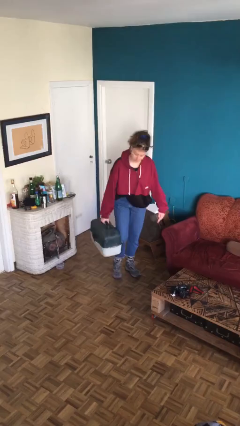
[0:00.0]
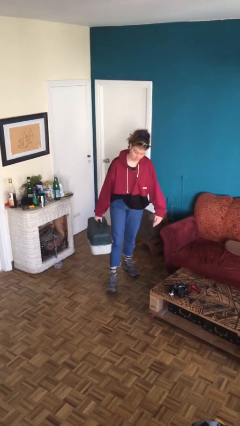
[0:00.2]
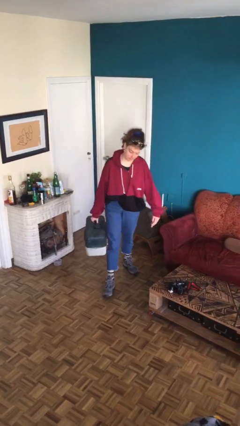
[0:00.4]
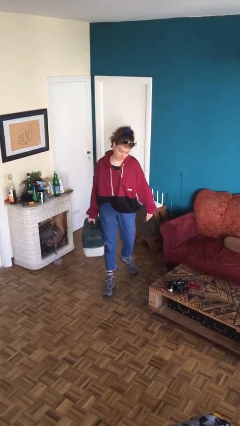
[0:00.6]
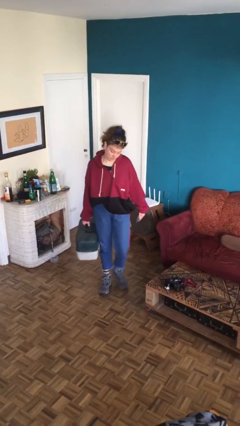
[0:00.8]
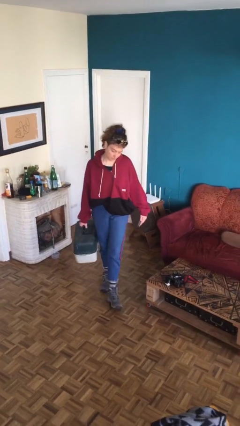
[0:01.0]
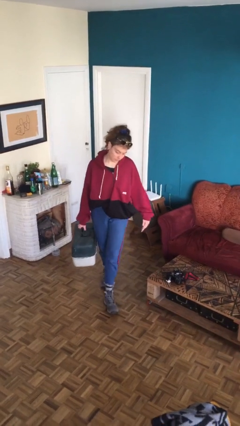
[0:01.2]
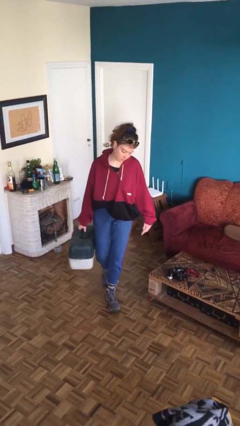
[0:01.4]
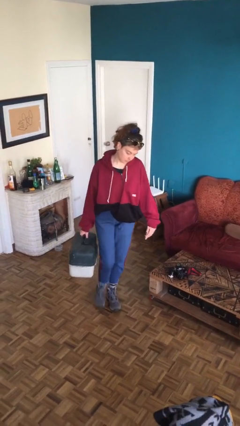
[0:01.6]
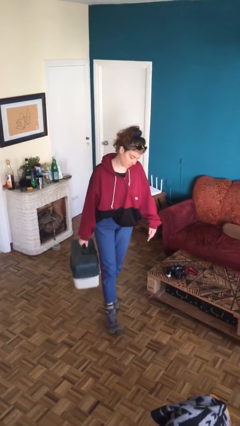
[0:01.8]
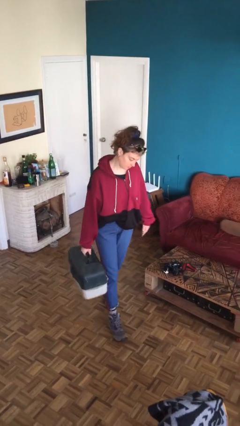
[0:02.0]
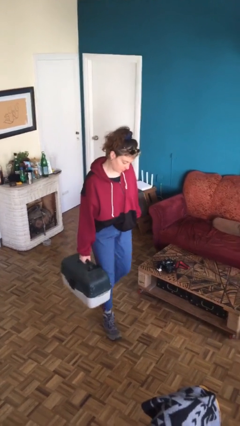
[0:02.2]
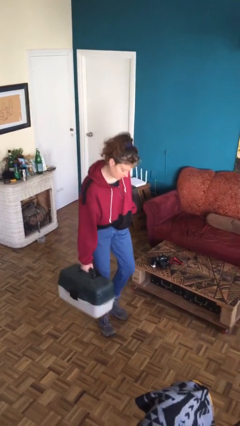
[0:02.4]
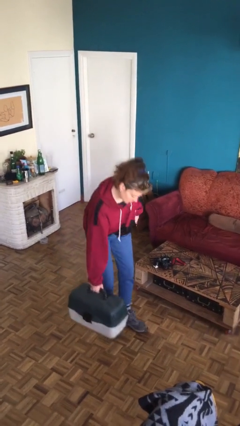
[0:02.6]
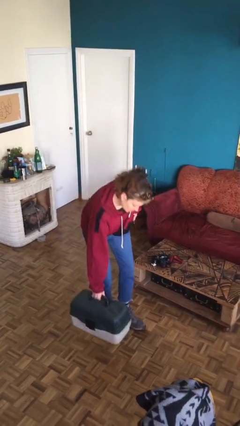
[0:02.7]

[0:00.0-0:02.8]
person carries heavy object

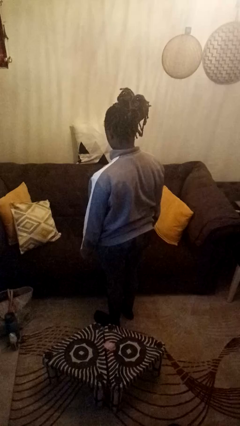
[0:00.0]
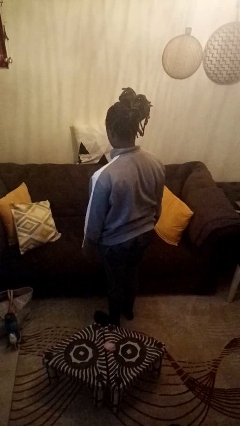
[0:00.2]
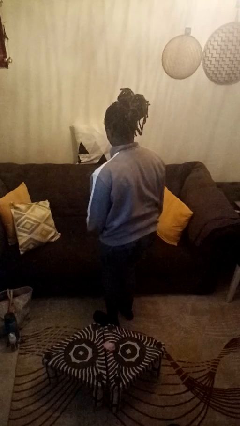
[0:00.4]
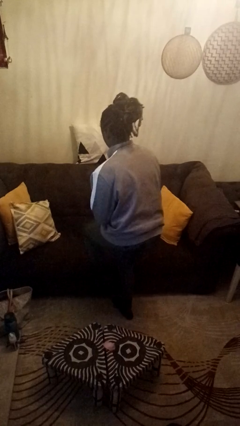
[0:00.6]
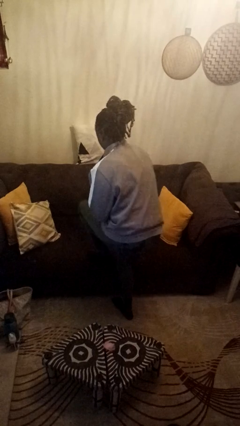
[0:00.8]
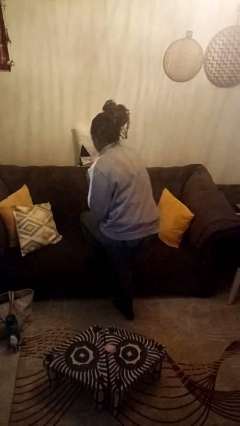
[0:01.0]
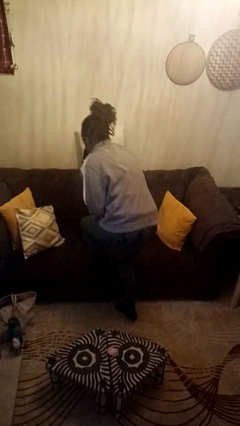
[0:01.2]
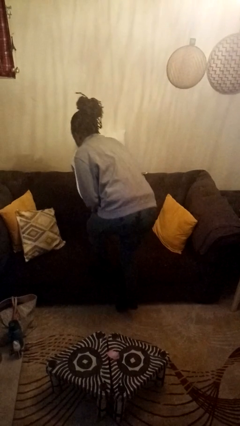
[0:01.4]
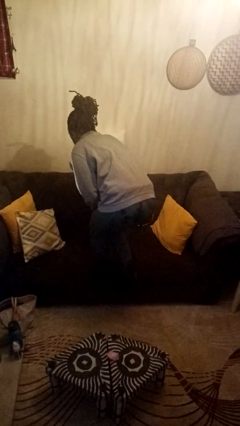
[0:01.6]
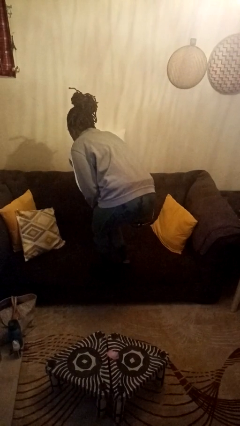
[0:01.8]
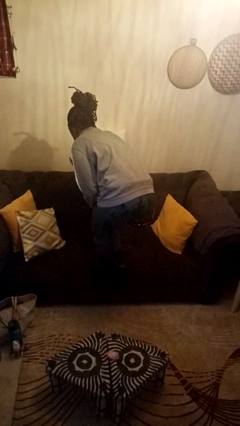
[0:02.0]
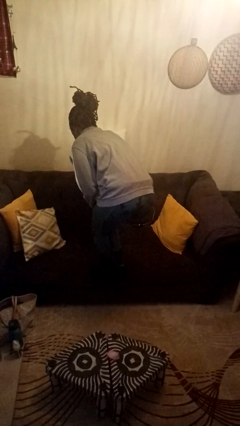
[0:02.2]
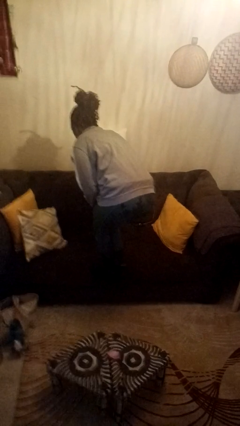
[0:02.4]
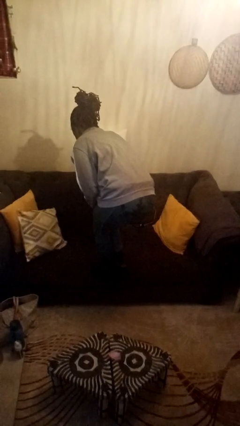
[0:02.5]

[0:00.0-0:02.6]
person climbs on couch

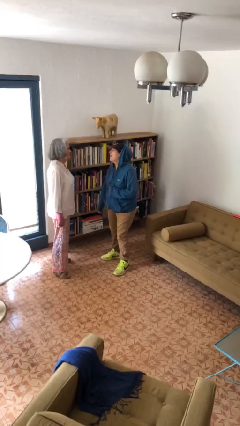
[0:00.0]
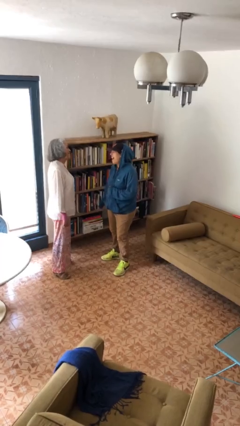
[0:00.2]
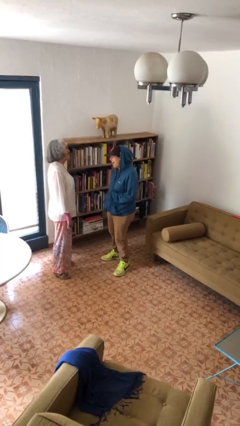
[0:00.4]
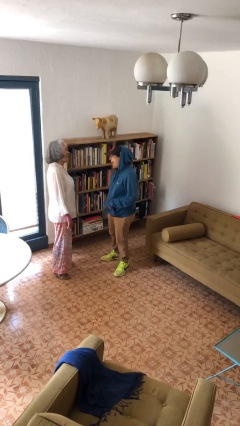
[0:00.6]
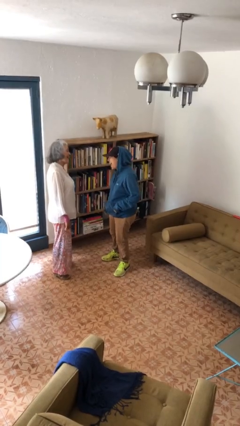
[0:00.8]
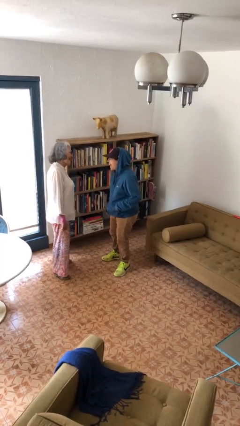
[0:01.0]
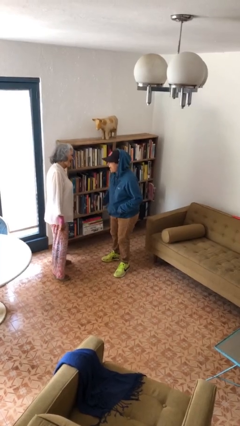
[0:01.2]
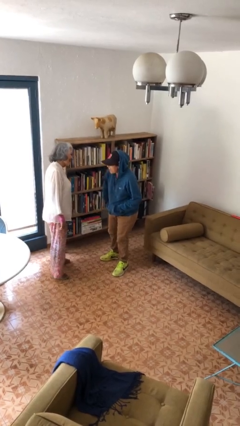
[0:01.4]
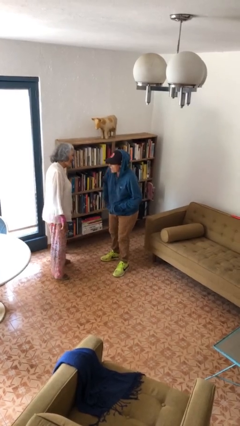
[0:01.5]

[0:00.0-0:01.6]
person laughs with person

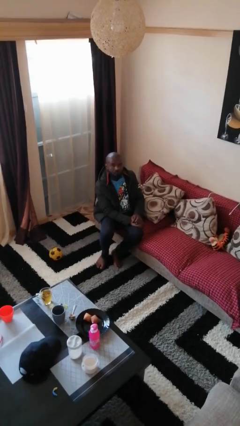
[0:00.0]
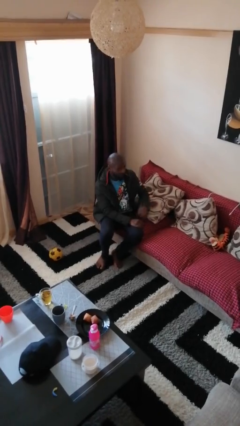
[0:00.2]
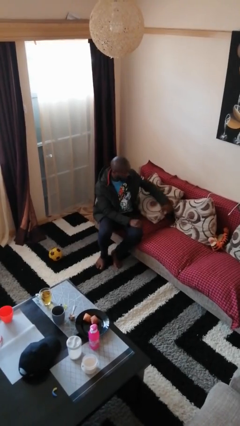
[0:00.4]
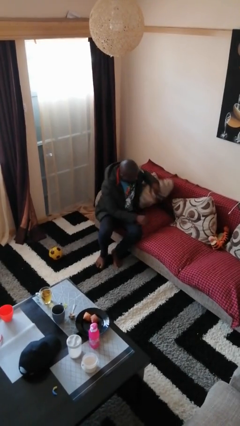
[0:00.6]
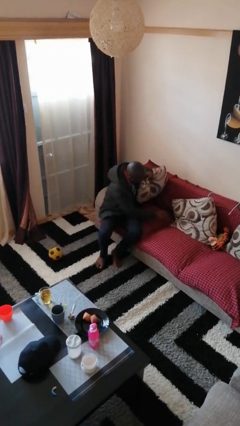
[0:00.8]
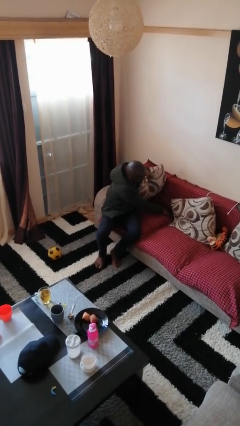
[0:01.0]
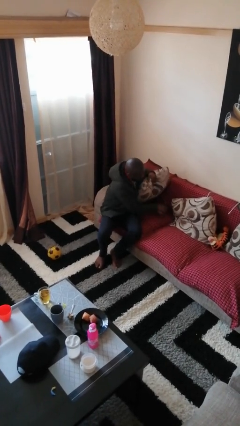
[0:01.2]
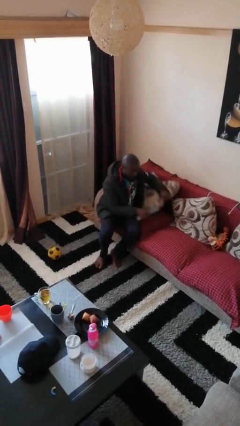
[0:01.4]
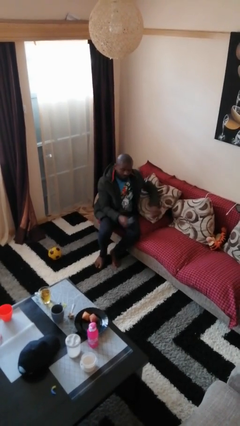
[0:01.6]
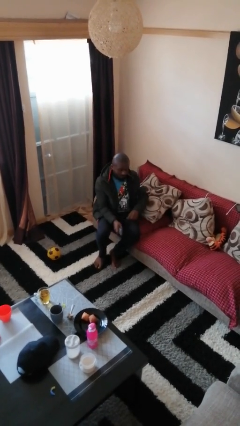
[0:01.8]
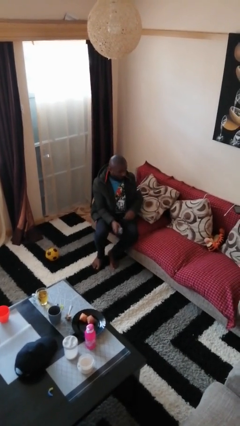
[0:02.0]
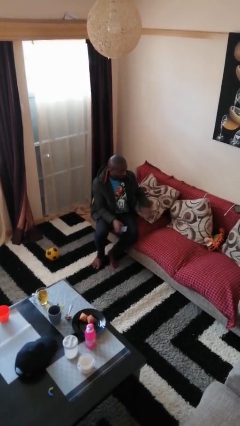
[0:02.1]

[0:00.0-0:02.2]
person searches in couch

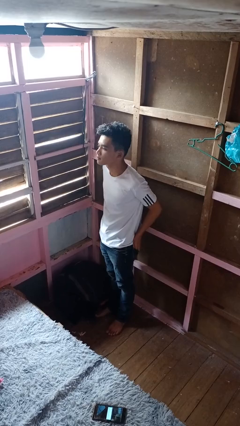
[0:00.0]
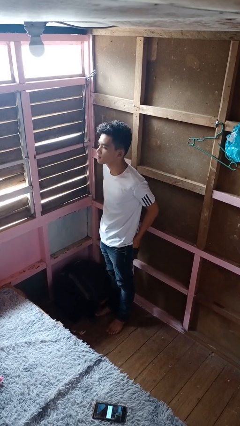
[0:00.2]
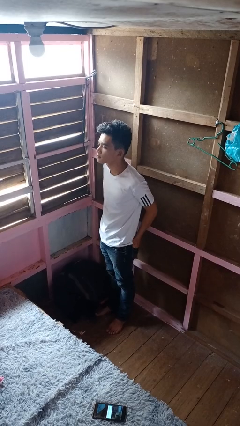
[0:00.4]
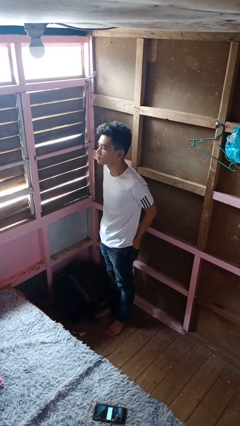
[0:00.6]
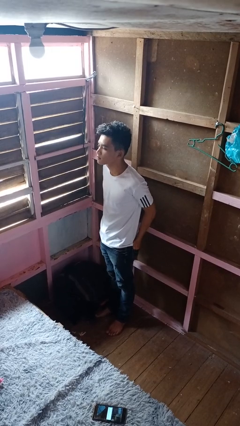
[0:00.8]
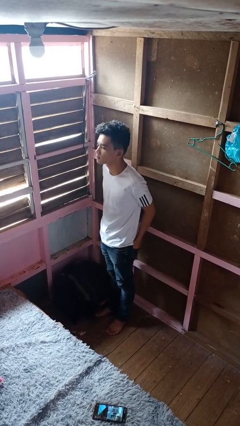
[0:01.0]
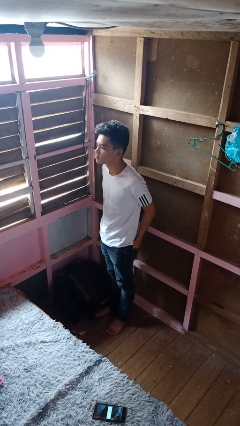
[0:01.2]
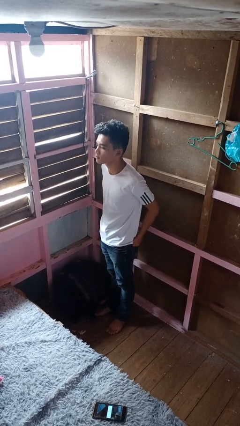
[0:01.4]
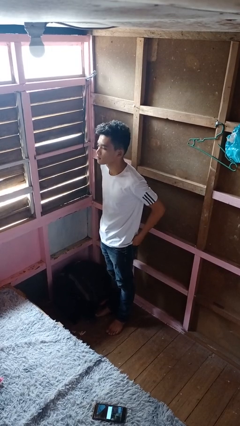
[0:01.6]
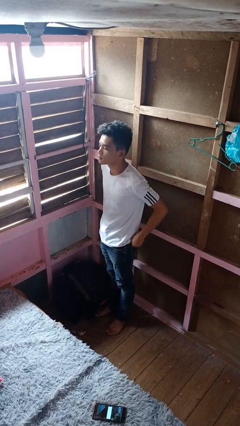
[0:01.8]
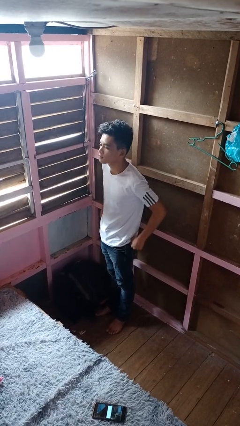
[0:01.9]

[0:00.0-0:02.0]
person puts hands in back pockets

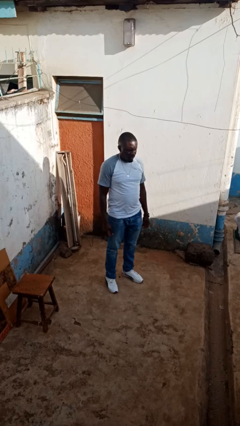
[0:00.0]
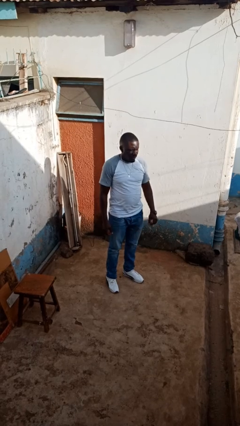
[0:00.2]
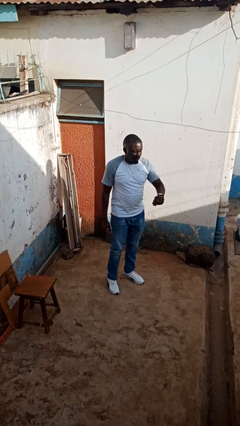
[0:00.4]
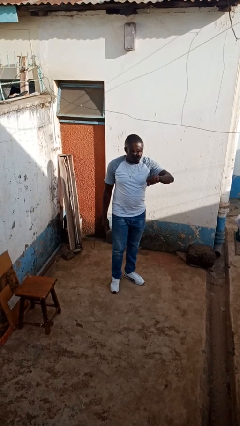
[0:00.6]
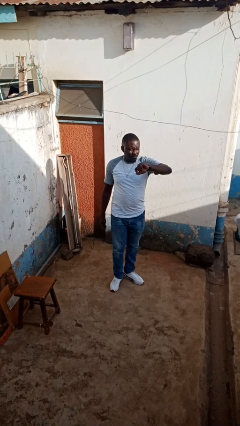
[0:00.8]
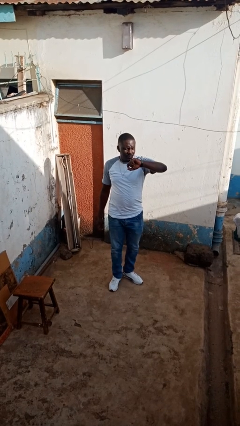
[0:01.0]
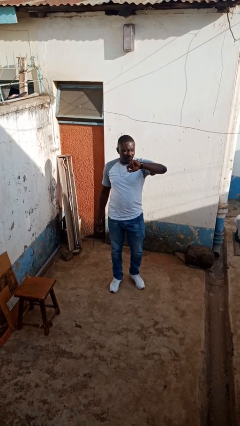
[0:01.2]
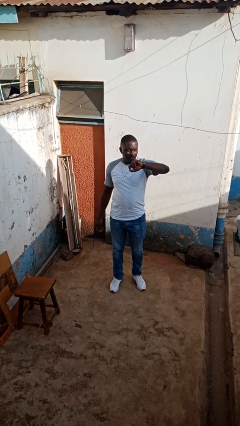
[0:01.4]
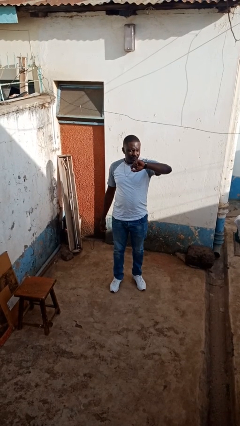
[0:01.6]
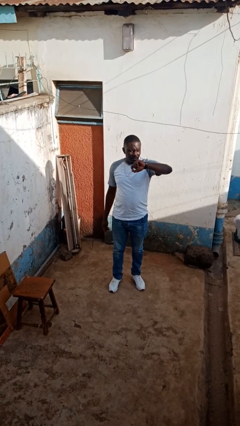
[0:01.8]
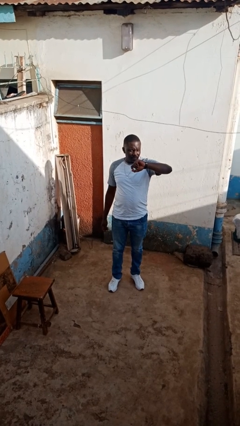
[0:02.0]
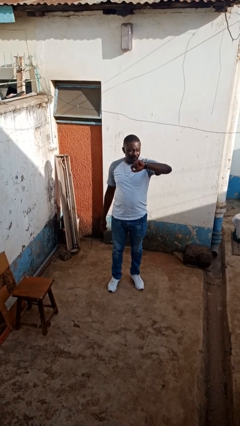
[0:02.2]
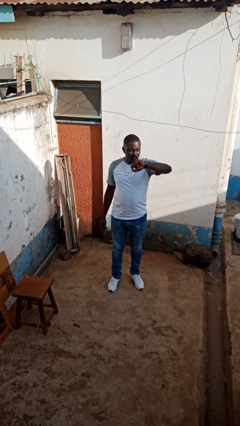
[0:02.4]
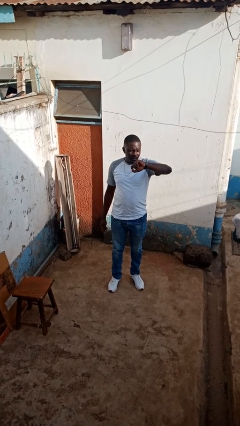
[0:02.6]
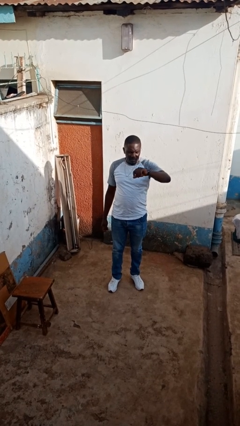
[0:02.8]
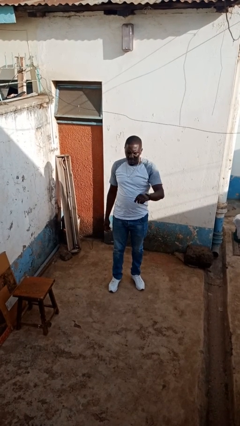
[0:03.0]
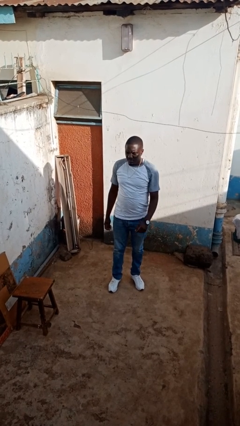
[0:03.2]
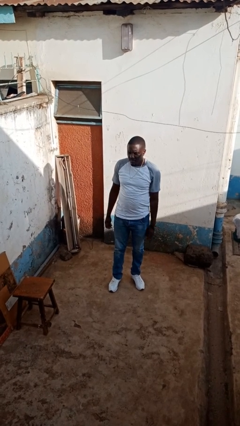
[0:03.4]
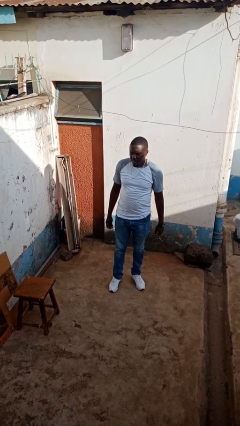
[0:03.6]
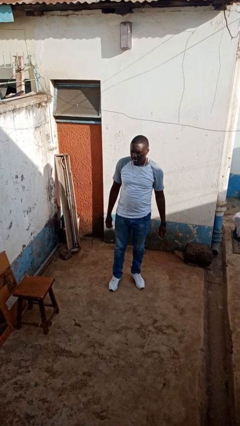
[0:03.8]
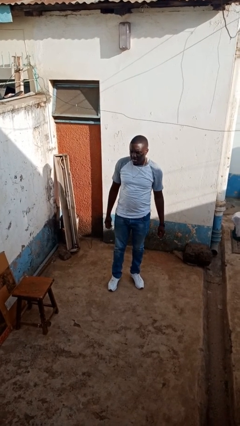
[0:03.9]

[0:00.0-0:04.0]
person looks at wristwatch

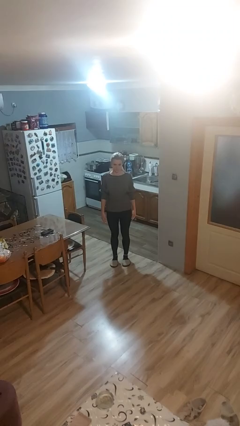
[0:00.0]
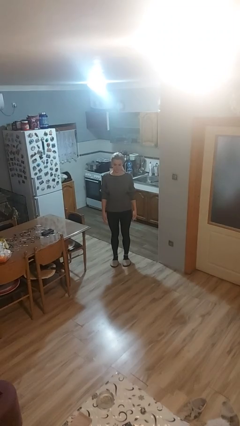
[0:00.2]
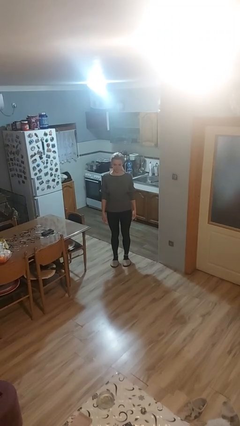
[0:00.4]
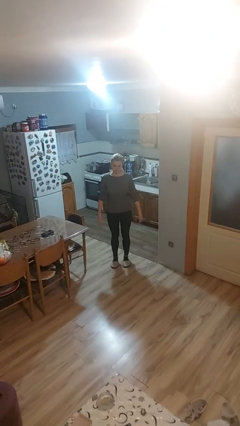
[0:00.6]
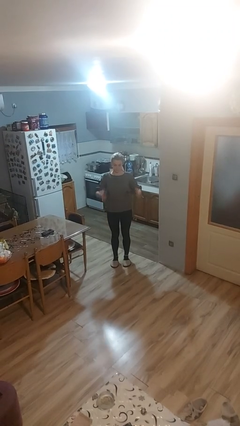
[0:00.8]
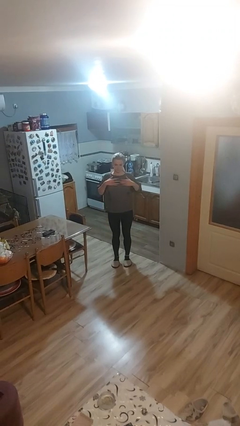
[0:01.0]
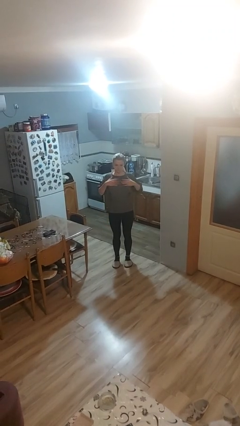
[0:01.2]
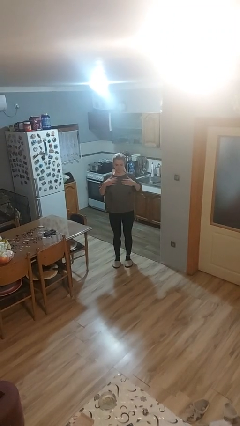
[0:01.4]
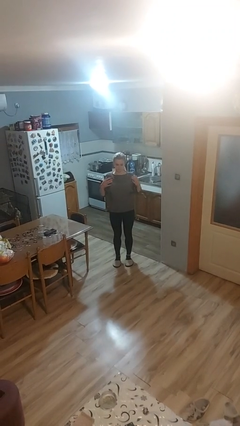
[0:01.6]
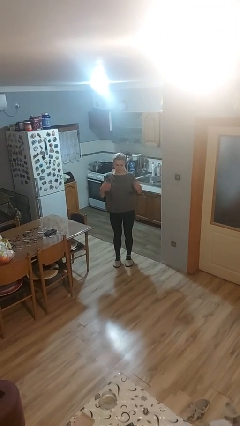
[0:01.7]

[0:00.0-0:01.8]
person drums on chest
